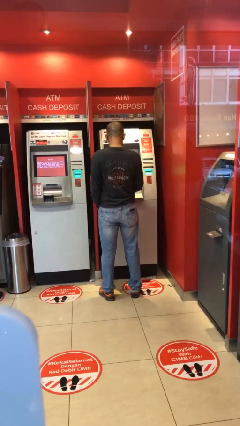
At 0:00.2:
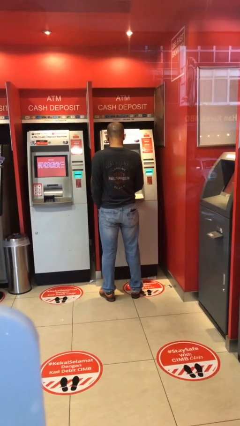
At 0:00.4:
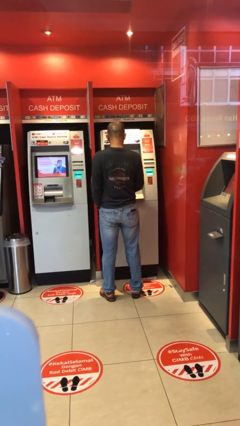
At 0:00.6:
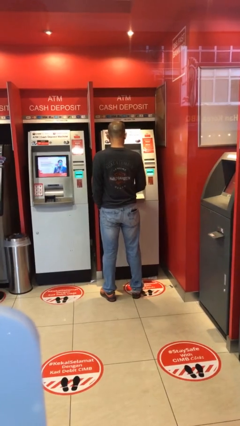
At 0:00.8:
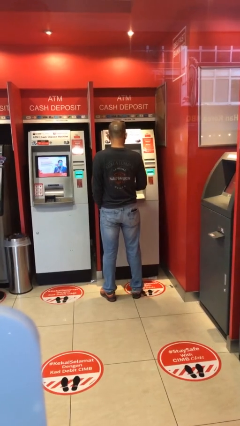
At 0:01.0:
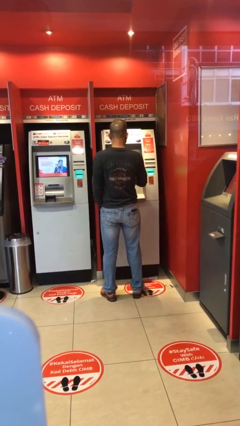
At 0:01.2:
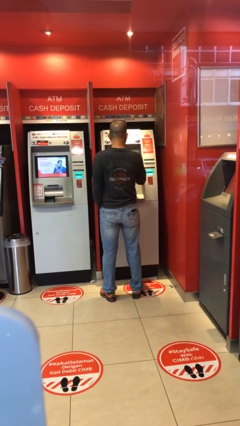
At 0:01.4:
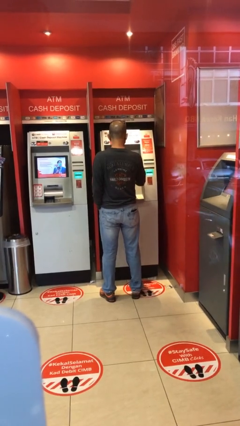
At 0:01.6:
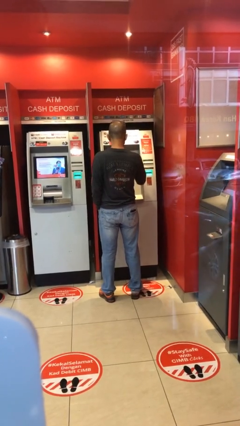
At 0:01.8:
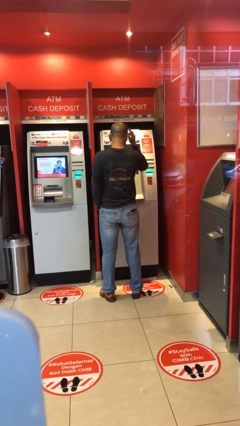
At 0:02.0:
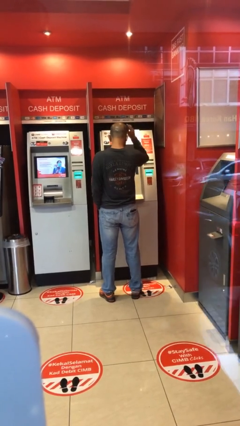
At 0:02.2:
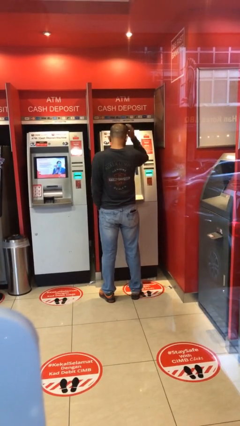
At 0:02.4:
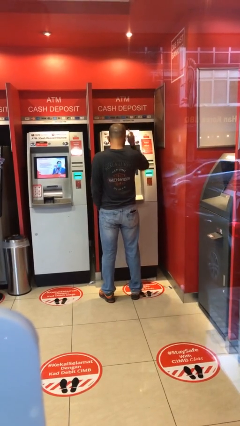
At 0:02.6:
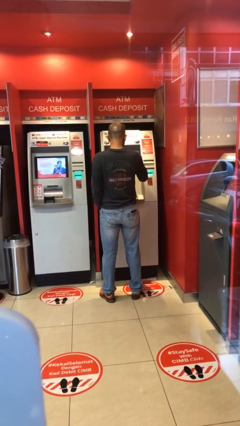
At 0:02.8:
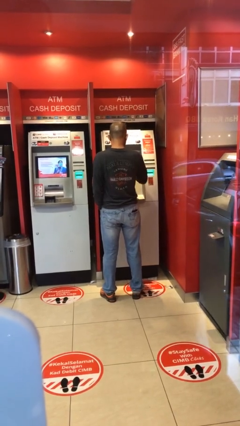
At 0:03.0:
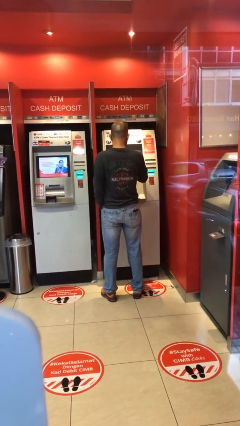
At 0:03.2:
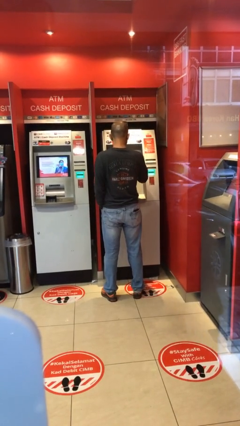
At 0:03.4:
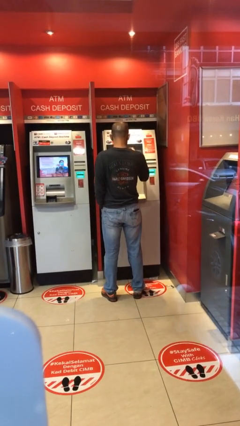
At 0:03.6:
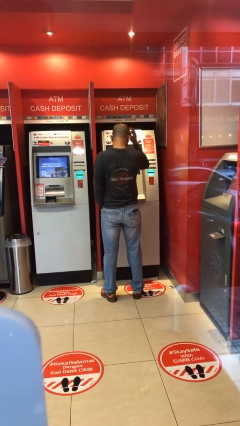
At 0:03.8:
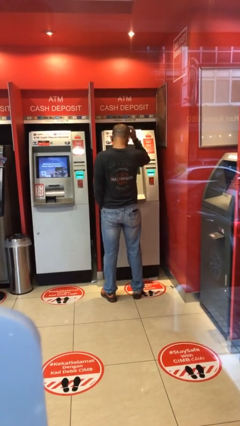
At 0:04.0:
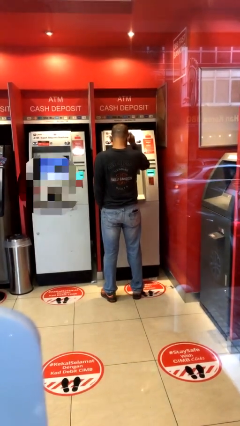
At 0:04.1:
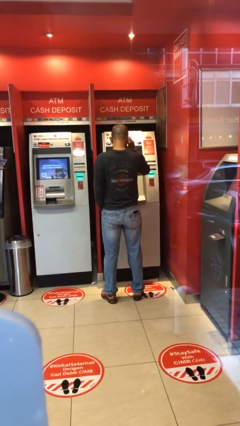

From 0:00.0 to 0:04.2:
person purchases from machine

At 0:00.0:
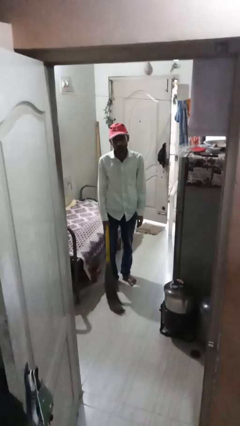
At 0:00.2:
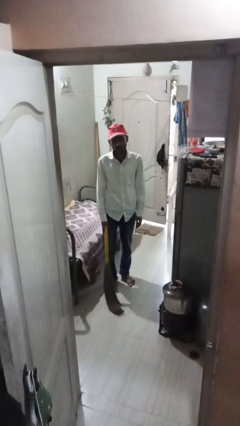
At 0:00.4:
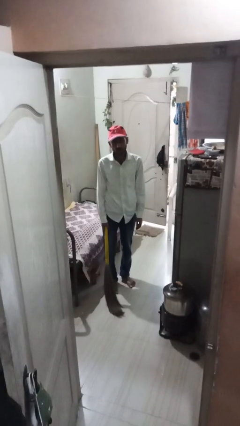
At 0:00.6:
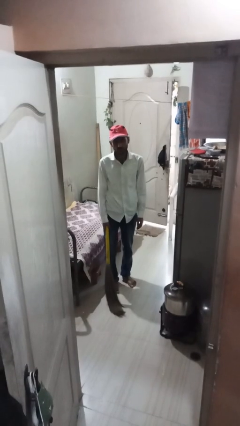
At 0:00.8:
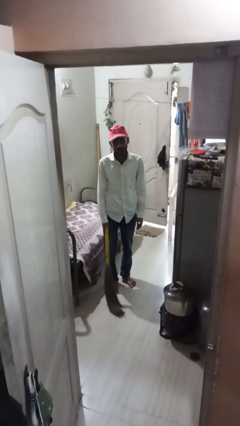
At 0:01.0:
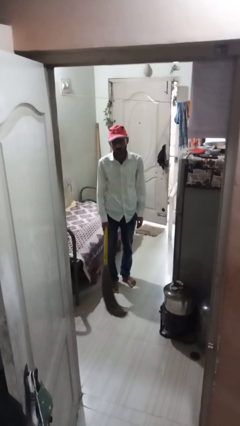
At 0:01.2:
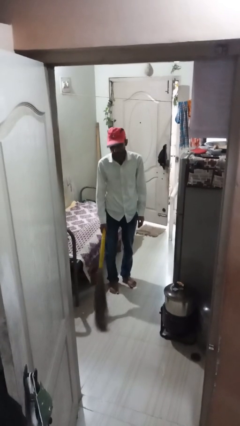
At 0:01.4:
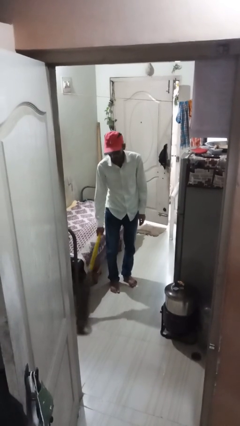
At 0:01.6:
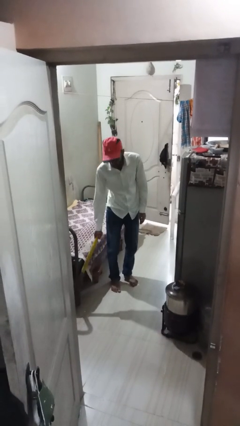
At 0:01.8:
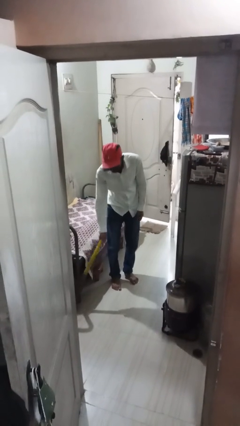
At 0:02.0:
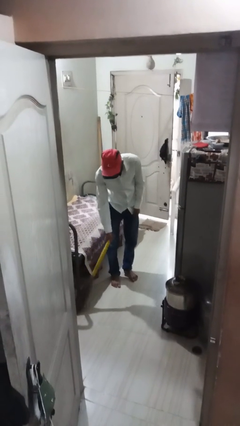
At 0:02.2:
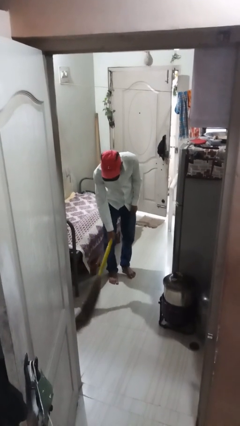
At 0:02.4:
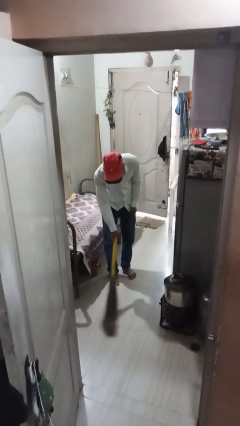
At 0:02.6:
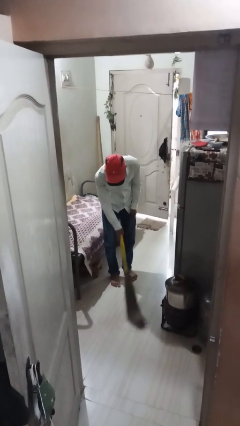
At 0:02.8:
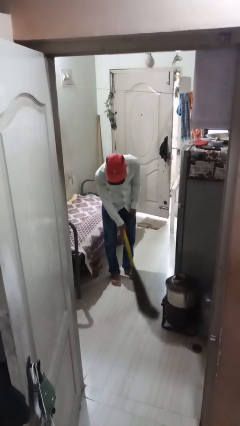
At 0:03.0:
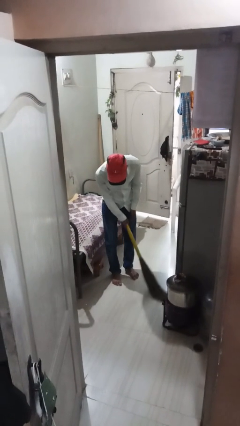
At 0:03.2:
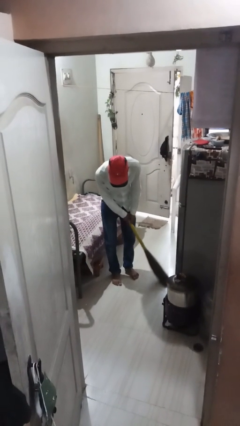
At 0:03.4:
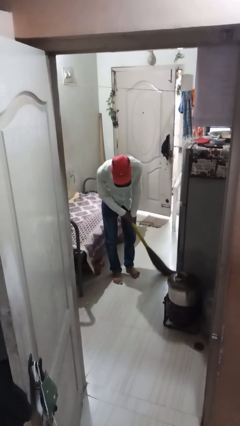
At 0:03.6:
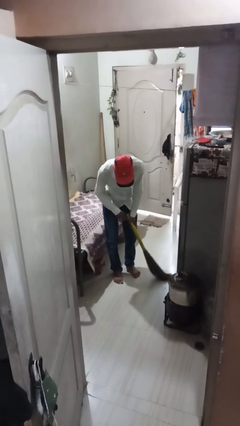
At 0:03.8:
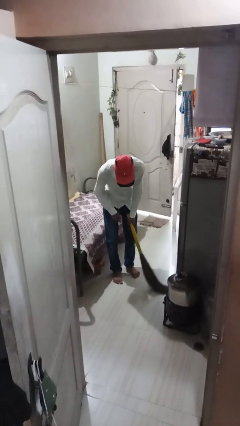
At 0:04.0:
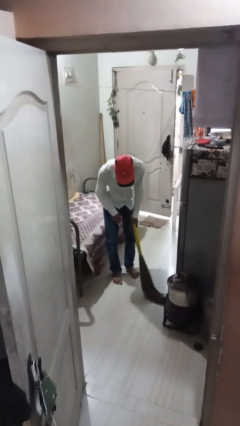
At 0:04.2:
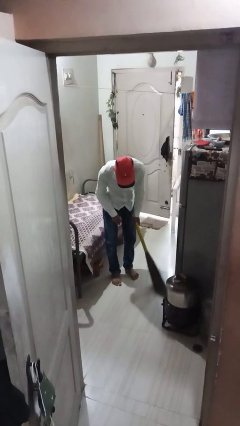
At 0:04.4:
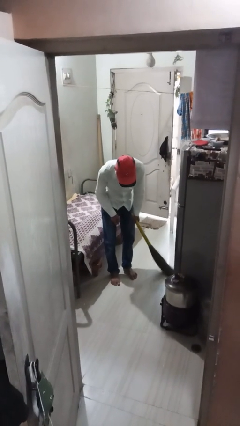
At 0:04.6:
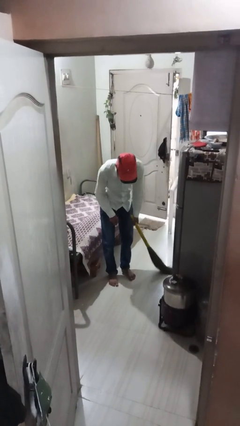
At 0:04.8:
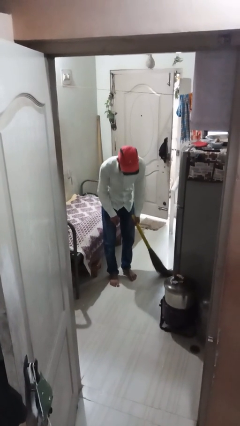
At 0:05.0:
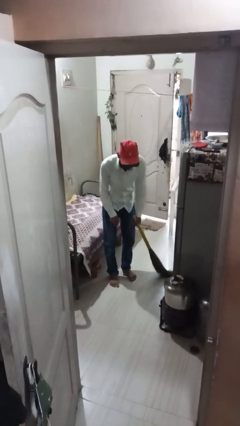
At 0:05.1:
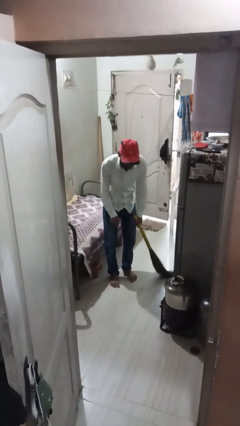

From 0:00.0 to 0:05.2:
person sweeps floor

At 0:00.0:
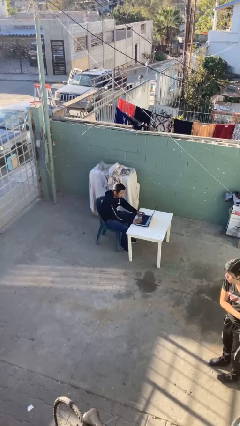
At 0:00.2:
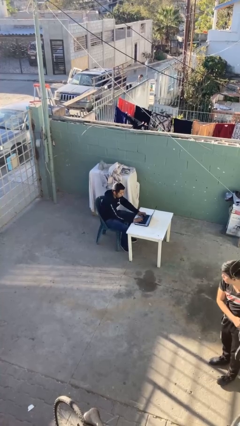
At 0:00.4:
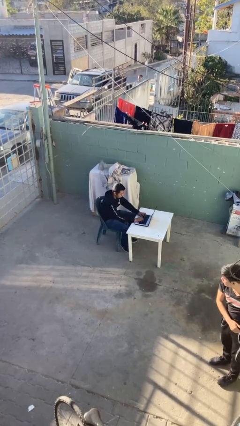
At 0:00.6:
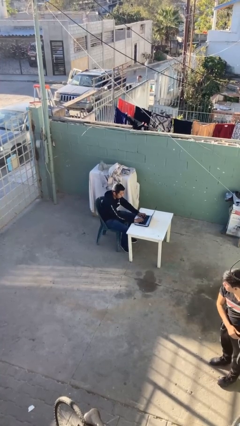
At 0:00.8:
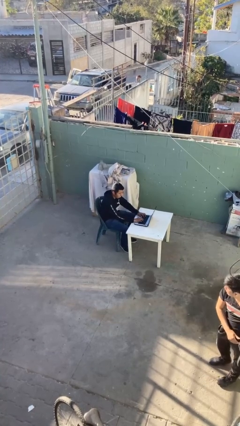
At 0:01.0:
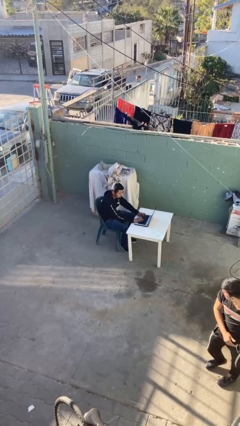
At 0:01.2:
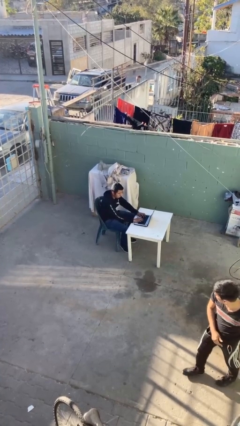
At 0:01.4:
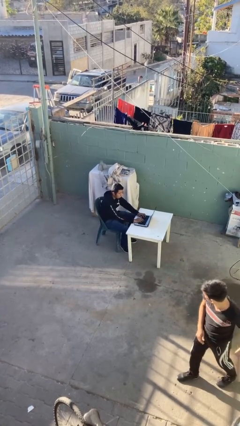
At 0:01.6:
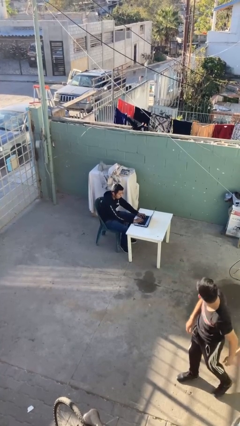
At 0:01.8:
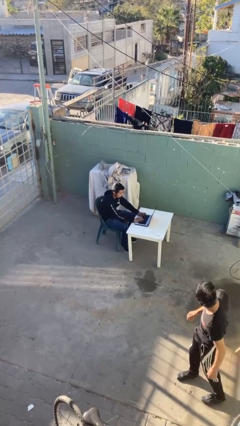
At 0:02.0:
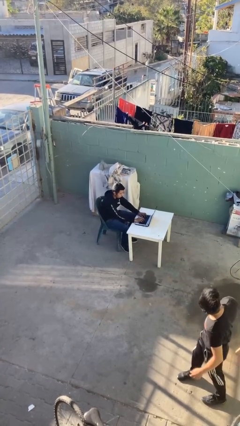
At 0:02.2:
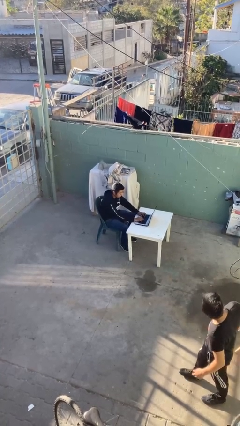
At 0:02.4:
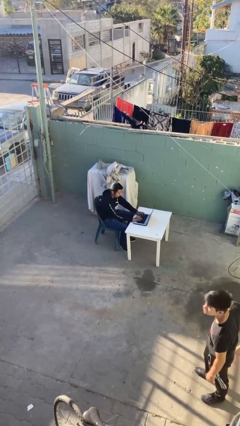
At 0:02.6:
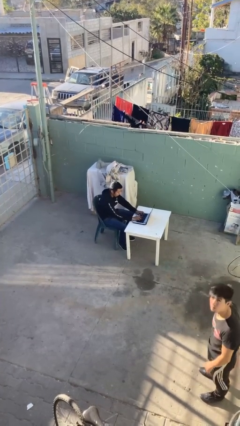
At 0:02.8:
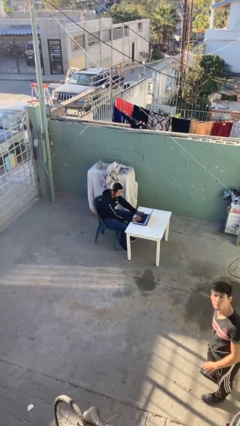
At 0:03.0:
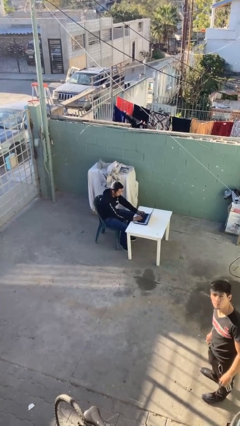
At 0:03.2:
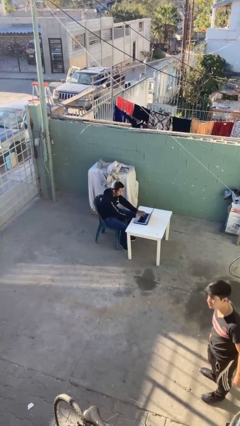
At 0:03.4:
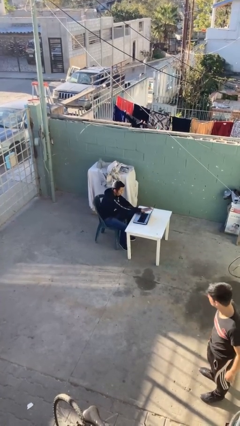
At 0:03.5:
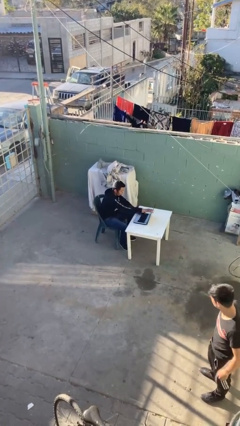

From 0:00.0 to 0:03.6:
person interacts with laptop

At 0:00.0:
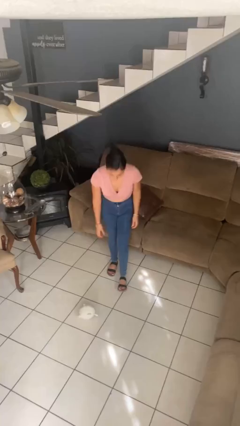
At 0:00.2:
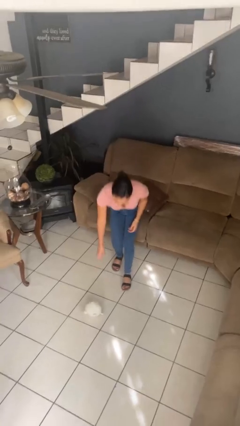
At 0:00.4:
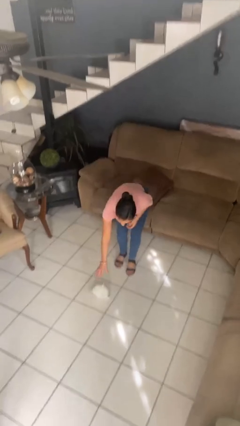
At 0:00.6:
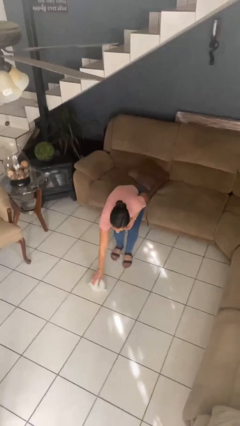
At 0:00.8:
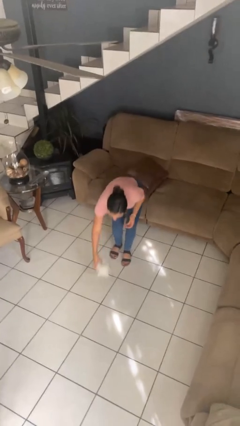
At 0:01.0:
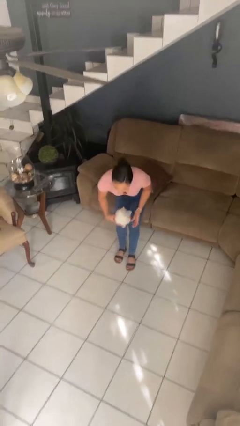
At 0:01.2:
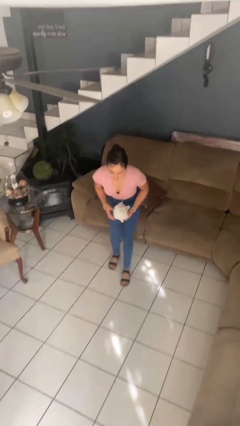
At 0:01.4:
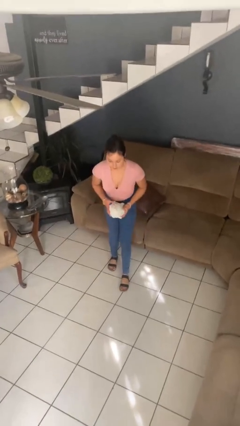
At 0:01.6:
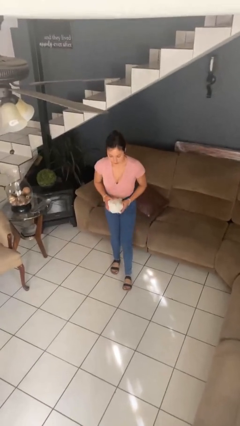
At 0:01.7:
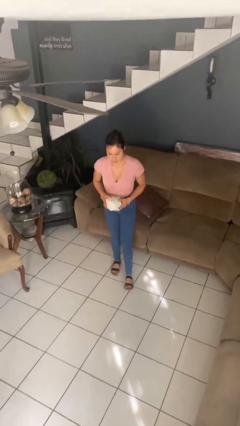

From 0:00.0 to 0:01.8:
person picks up object from floor

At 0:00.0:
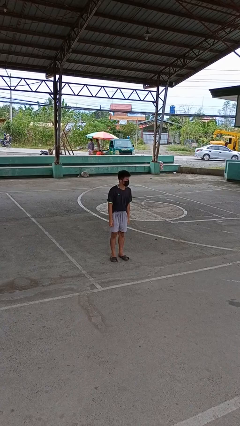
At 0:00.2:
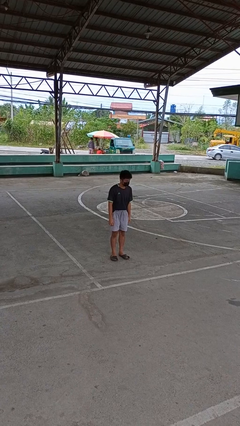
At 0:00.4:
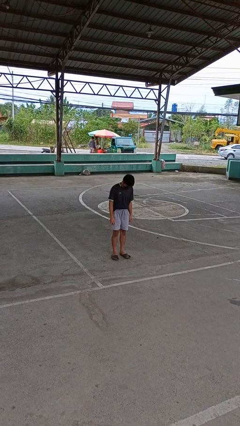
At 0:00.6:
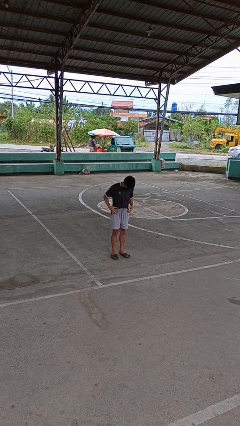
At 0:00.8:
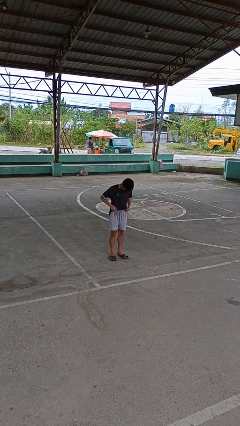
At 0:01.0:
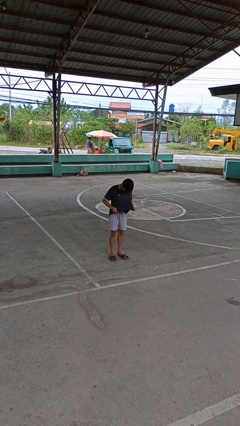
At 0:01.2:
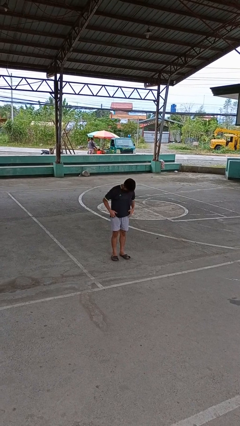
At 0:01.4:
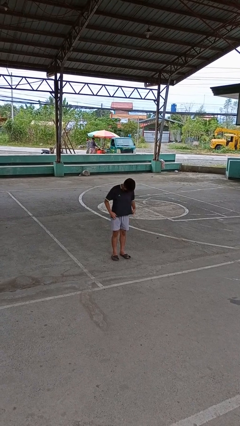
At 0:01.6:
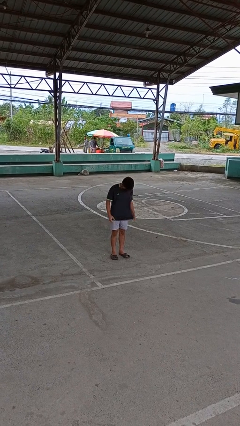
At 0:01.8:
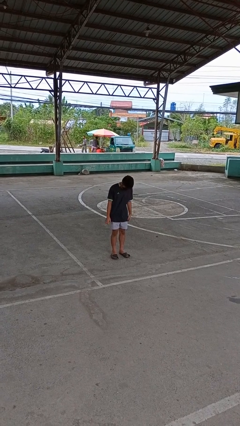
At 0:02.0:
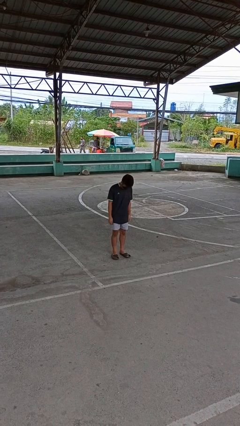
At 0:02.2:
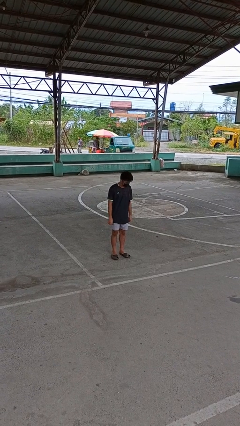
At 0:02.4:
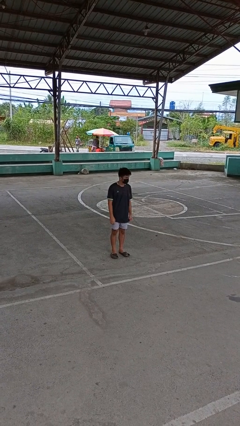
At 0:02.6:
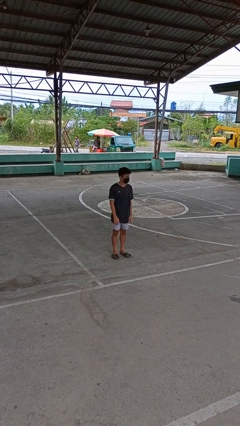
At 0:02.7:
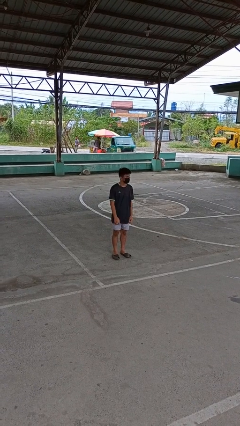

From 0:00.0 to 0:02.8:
person untucks shirt
